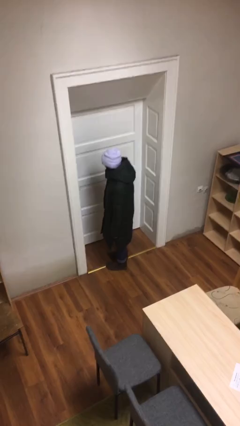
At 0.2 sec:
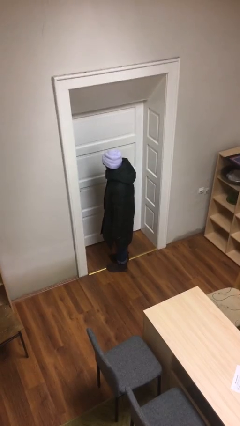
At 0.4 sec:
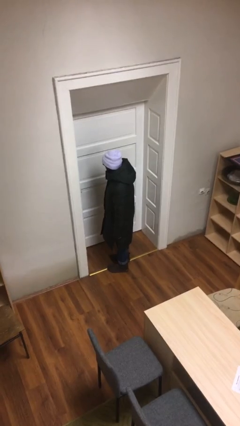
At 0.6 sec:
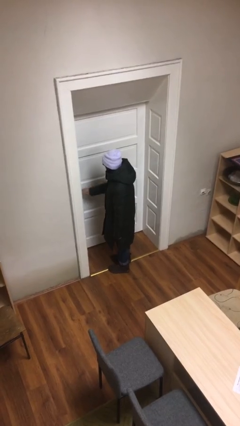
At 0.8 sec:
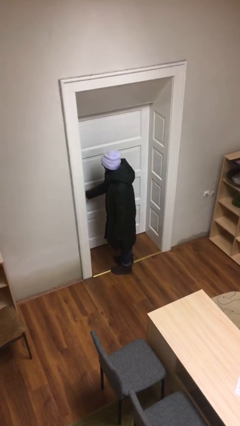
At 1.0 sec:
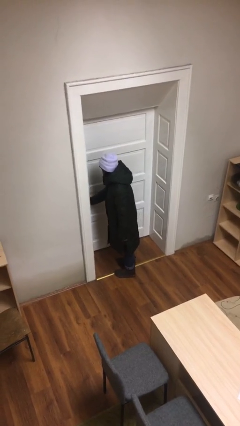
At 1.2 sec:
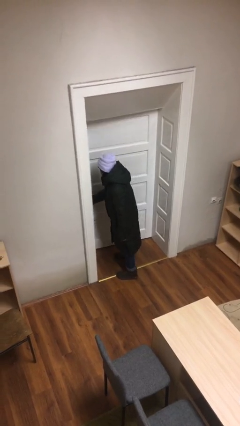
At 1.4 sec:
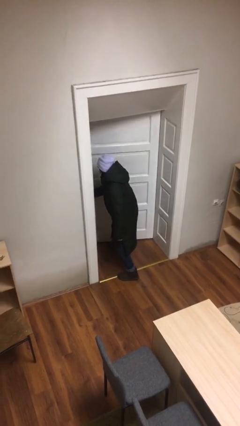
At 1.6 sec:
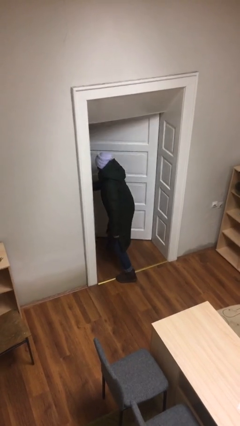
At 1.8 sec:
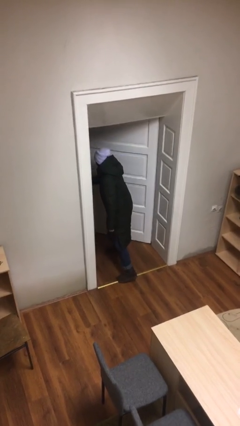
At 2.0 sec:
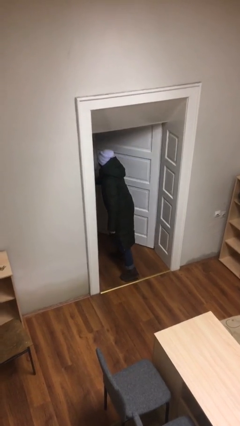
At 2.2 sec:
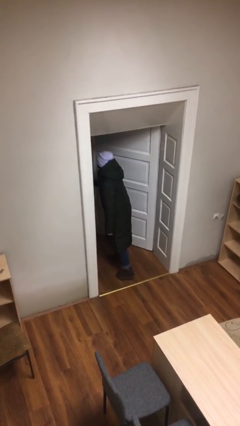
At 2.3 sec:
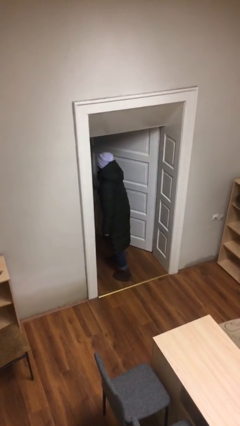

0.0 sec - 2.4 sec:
person opens facility door

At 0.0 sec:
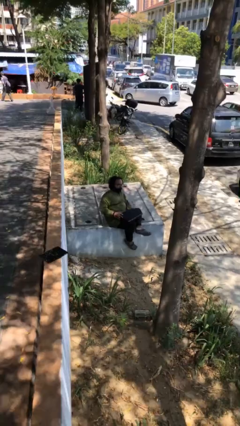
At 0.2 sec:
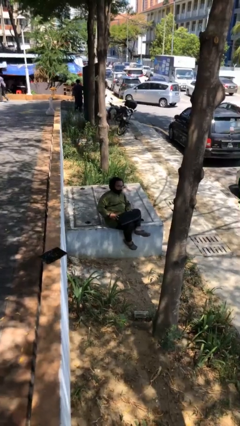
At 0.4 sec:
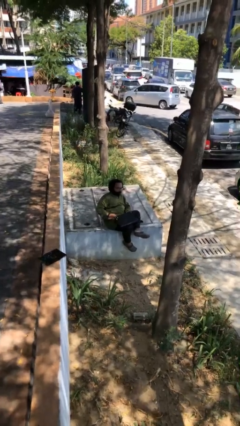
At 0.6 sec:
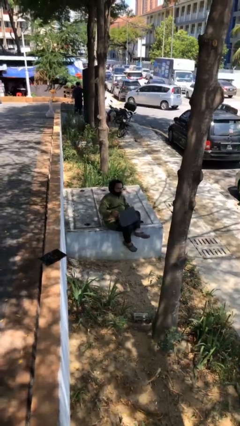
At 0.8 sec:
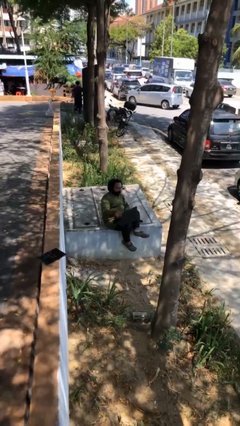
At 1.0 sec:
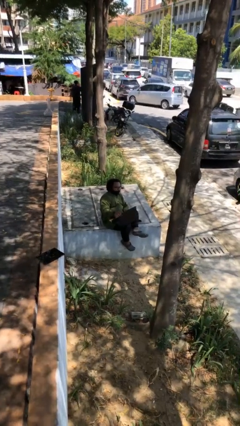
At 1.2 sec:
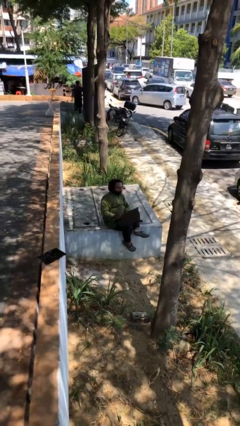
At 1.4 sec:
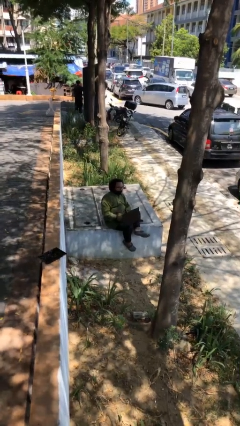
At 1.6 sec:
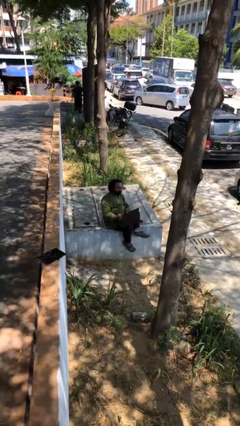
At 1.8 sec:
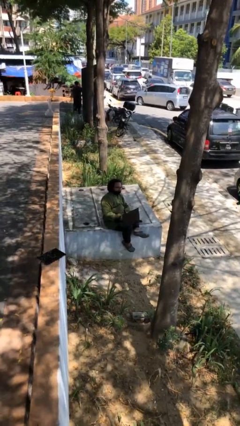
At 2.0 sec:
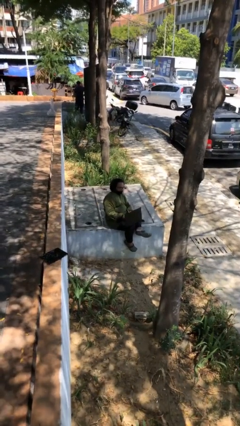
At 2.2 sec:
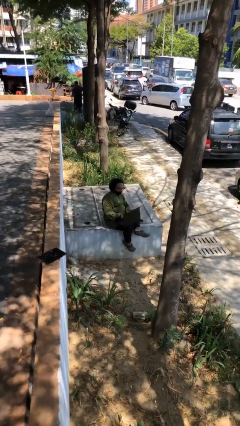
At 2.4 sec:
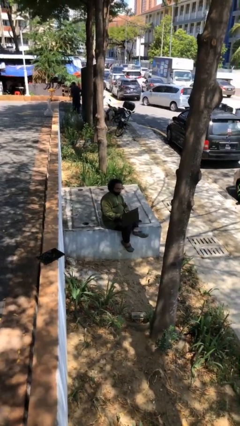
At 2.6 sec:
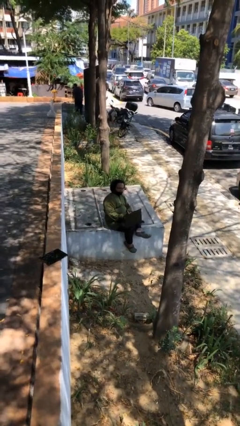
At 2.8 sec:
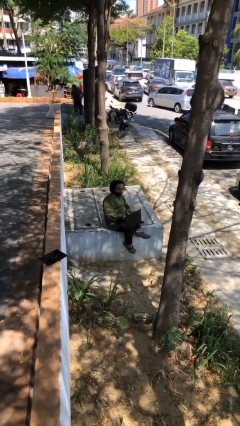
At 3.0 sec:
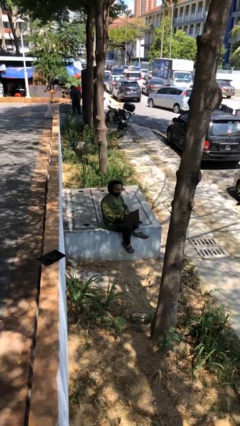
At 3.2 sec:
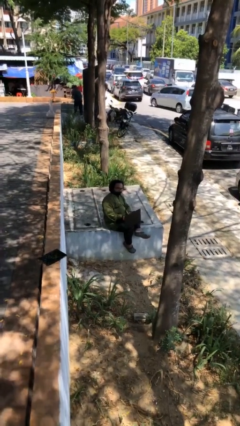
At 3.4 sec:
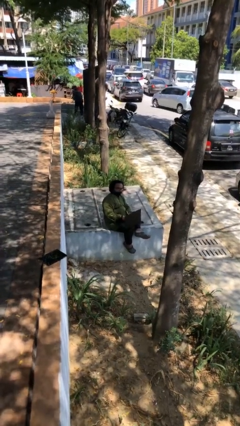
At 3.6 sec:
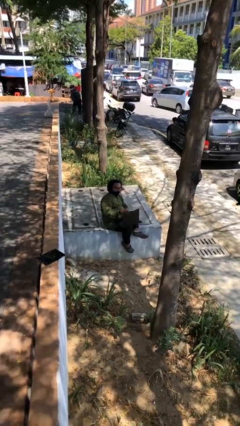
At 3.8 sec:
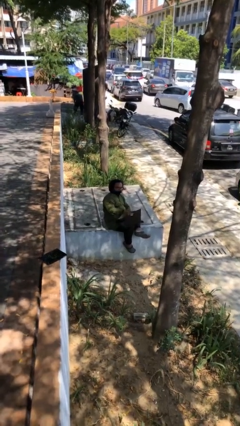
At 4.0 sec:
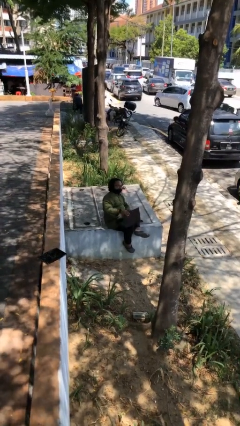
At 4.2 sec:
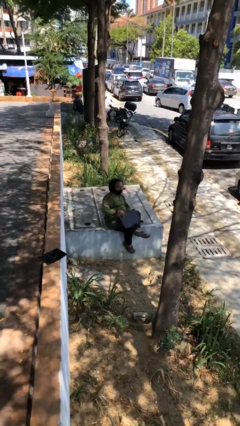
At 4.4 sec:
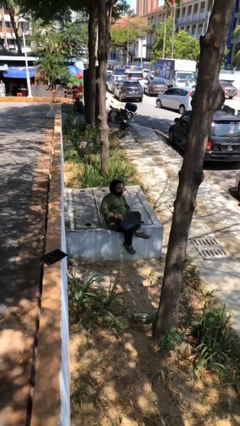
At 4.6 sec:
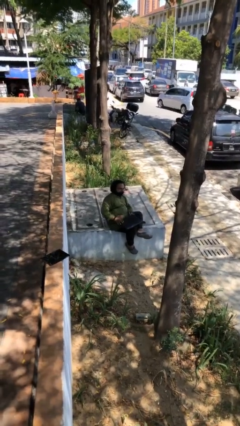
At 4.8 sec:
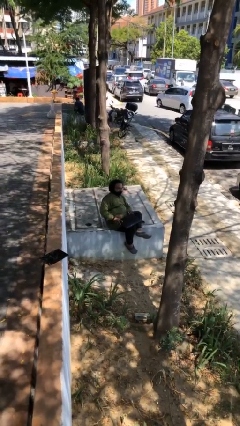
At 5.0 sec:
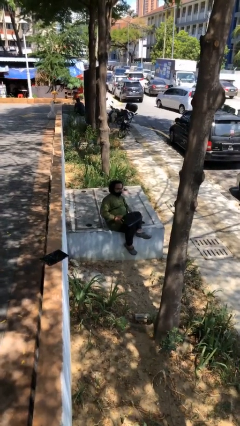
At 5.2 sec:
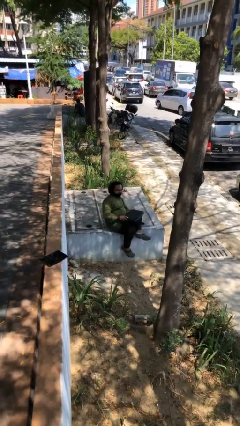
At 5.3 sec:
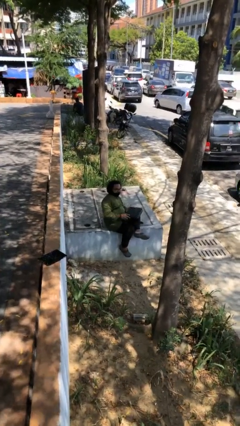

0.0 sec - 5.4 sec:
person interacts with laptop

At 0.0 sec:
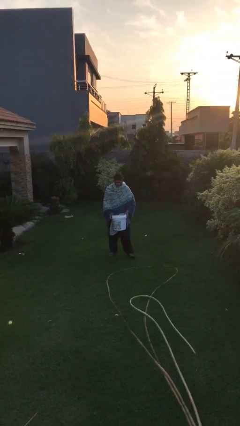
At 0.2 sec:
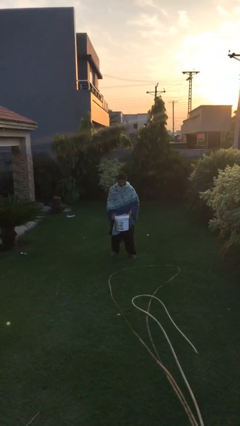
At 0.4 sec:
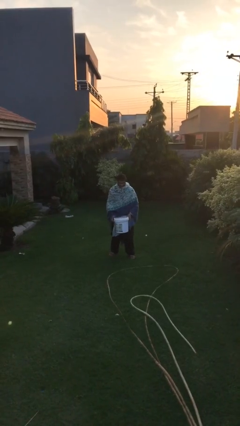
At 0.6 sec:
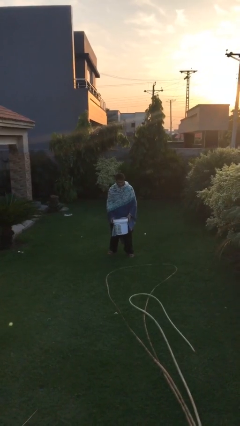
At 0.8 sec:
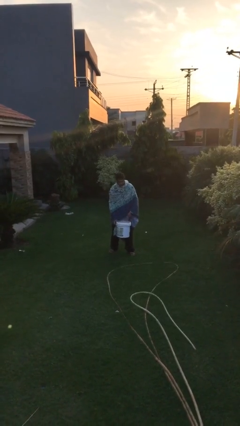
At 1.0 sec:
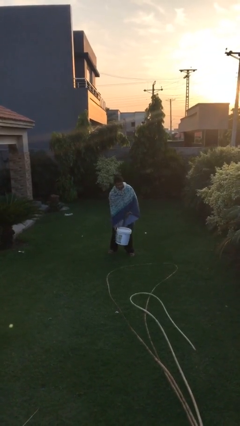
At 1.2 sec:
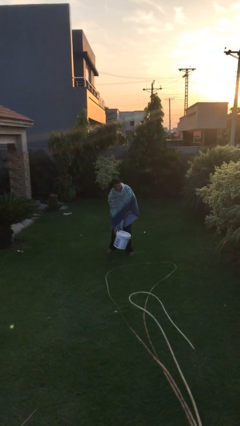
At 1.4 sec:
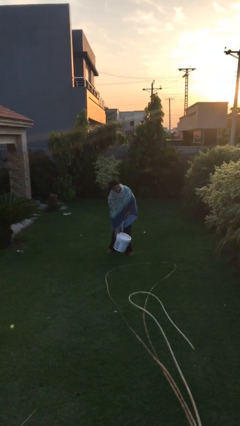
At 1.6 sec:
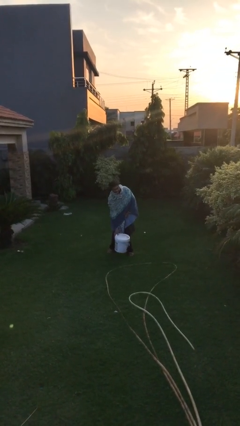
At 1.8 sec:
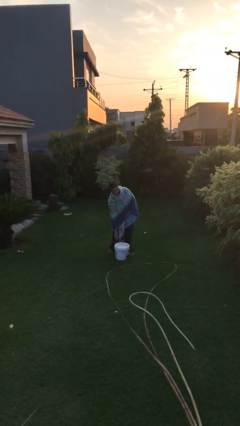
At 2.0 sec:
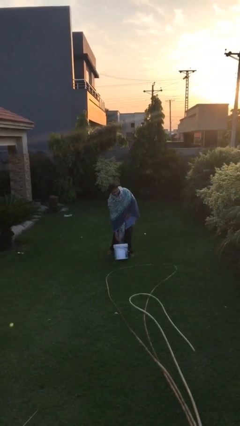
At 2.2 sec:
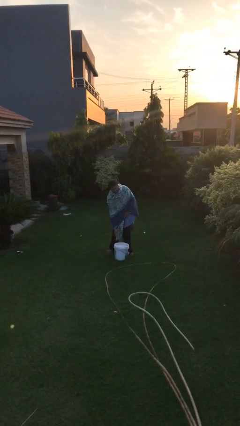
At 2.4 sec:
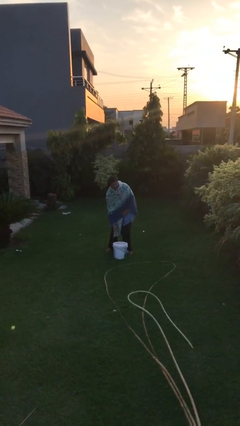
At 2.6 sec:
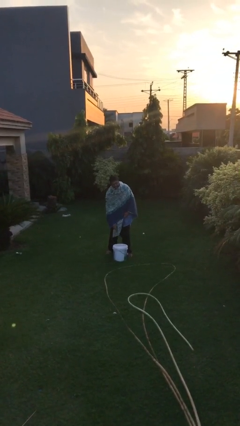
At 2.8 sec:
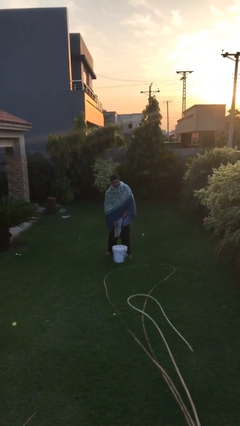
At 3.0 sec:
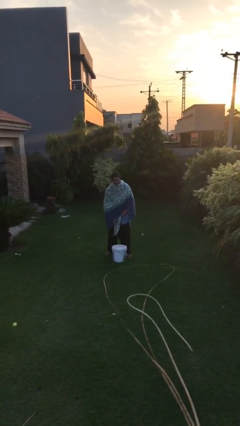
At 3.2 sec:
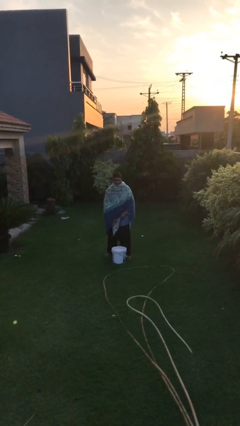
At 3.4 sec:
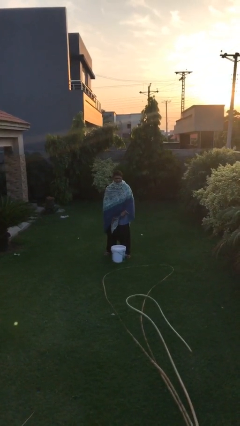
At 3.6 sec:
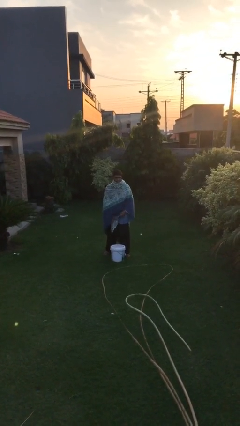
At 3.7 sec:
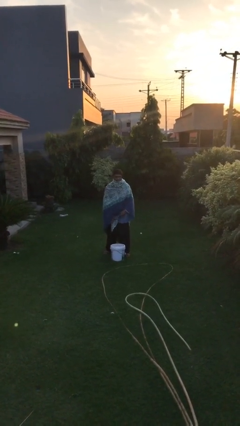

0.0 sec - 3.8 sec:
person puts down object on floor

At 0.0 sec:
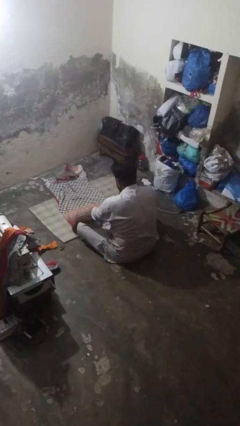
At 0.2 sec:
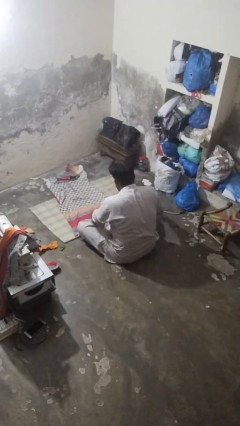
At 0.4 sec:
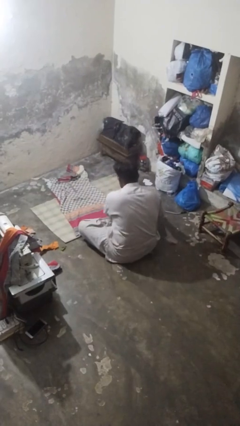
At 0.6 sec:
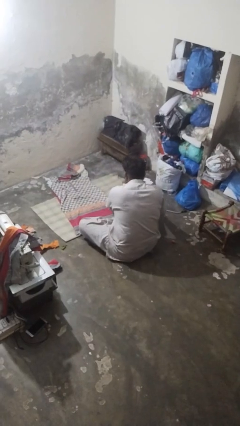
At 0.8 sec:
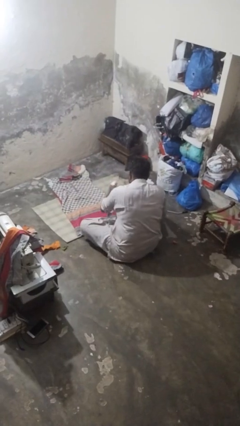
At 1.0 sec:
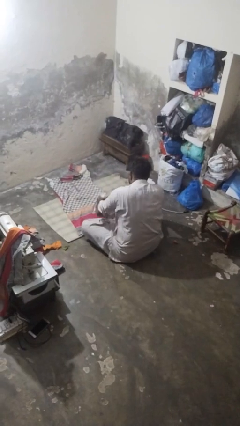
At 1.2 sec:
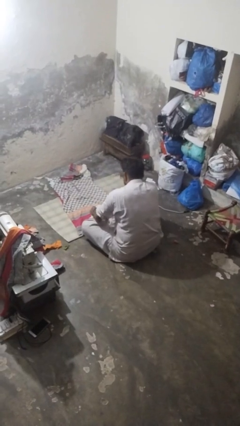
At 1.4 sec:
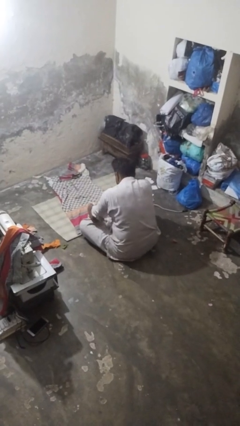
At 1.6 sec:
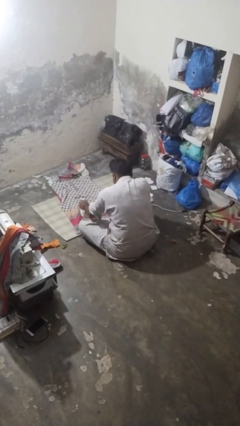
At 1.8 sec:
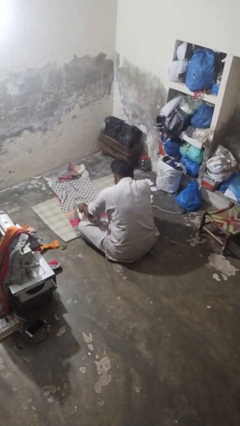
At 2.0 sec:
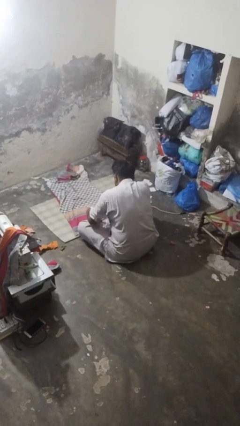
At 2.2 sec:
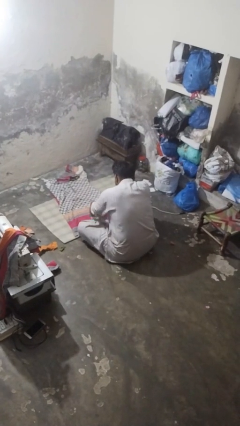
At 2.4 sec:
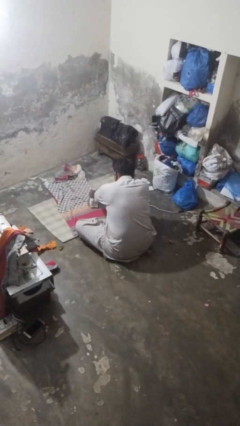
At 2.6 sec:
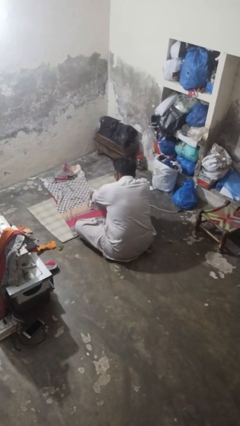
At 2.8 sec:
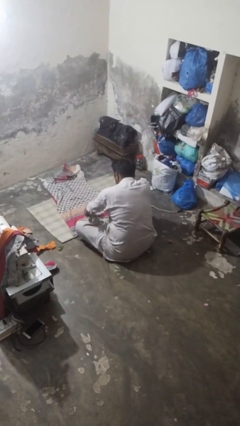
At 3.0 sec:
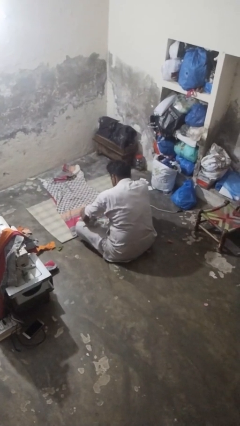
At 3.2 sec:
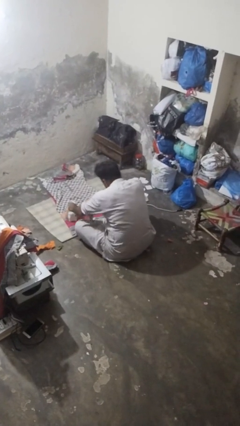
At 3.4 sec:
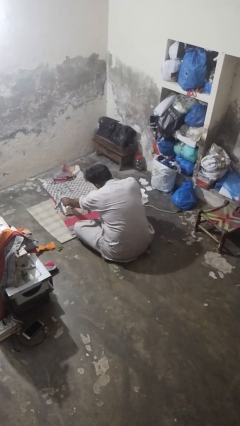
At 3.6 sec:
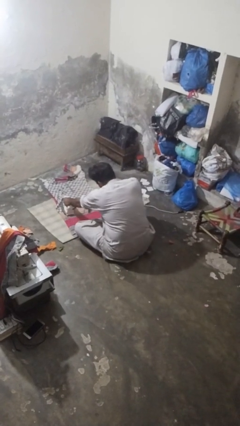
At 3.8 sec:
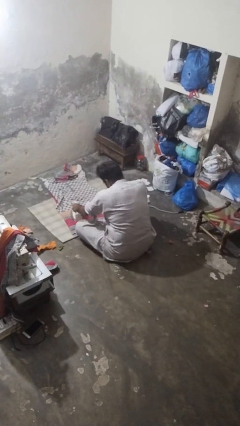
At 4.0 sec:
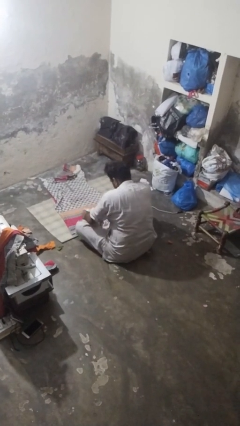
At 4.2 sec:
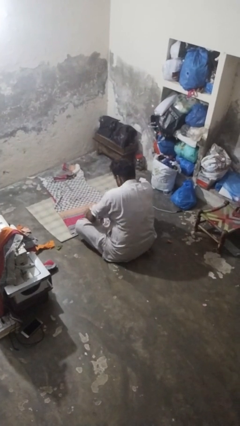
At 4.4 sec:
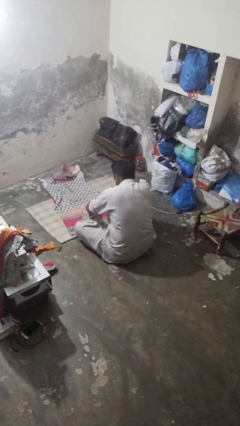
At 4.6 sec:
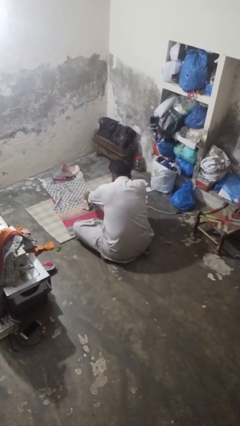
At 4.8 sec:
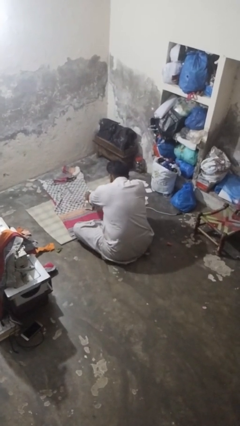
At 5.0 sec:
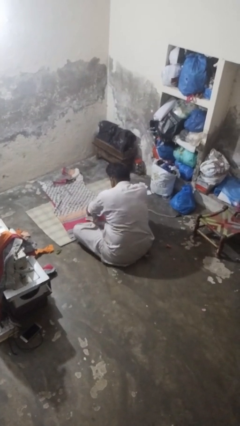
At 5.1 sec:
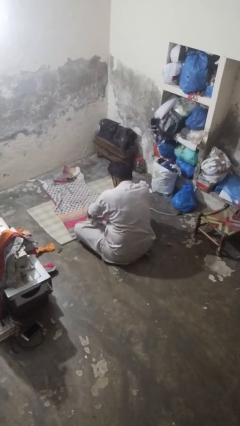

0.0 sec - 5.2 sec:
person irons clothes

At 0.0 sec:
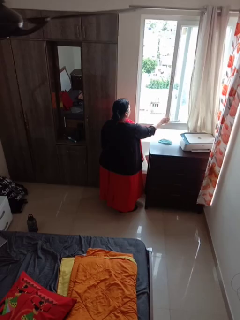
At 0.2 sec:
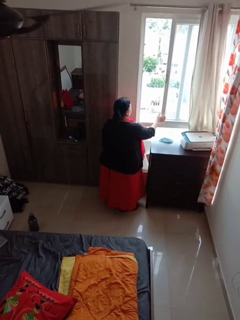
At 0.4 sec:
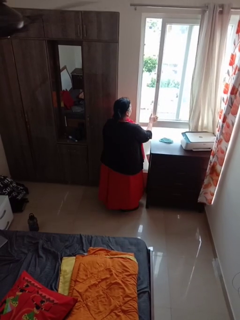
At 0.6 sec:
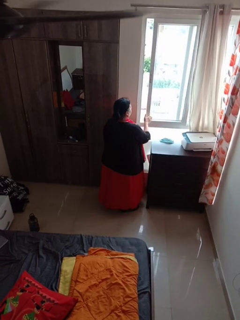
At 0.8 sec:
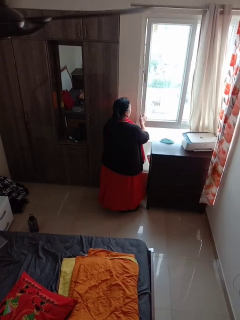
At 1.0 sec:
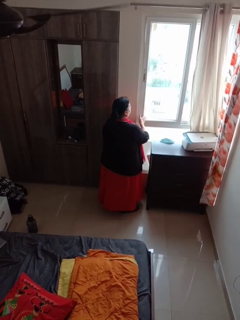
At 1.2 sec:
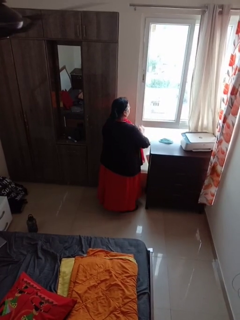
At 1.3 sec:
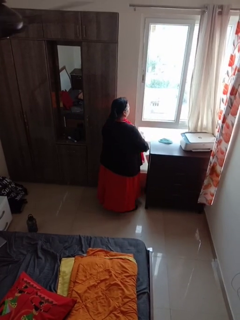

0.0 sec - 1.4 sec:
person closes home window
